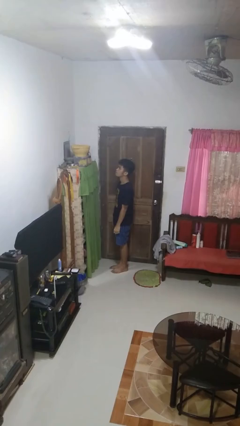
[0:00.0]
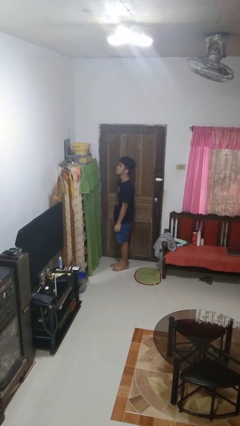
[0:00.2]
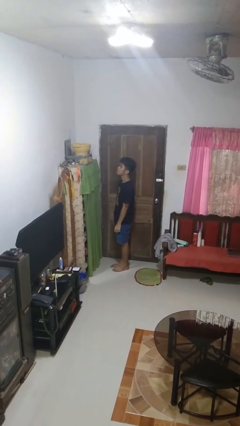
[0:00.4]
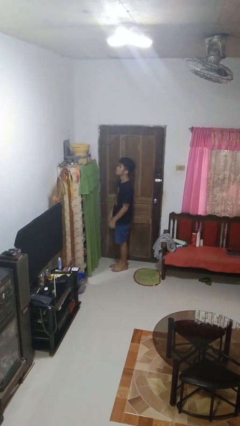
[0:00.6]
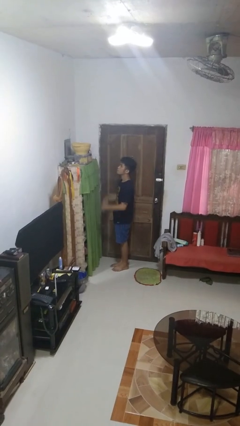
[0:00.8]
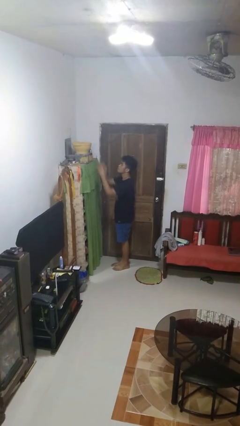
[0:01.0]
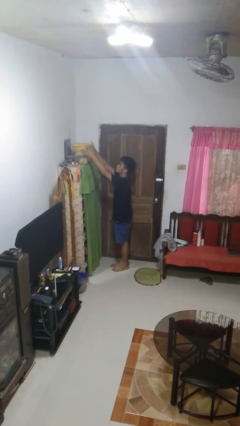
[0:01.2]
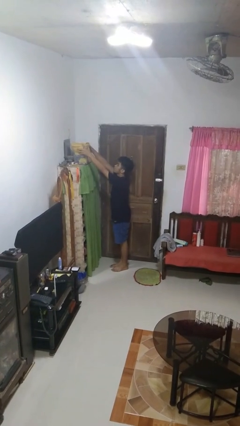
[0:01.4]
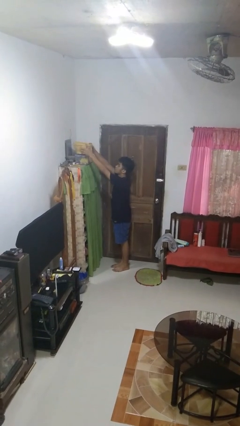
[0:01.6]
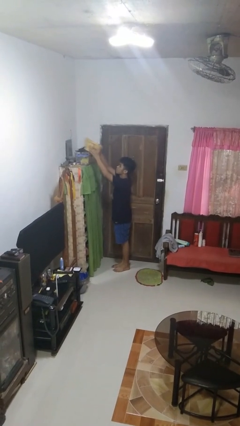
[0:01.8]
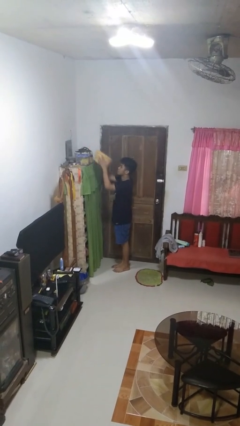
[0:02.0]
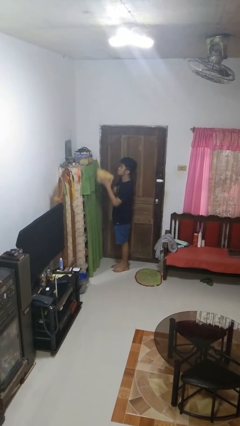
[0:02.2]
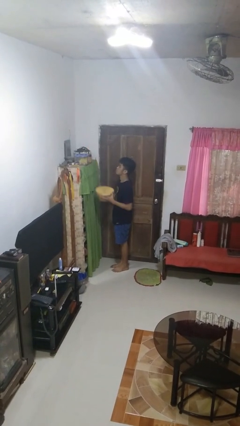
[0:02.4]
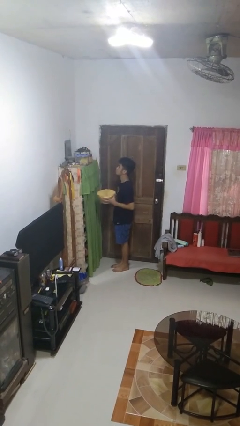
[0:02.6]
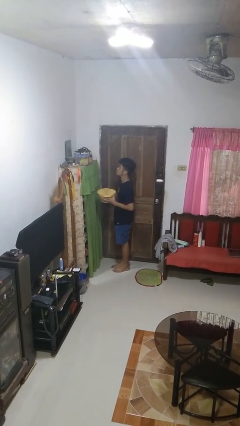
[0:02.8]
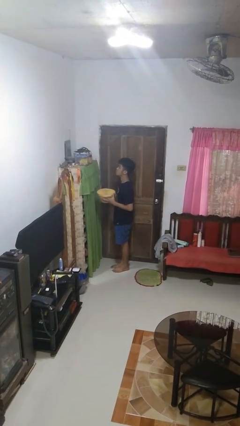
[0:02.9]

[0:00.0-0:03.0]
person picks up object from shelf

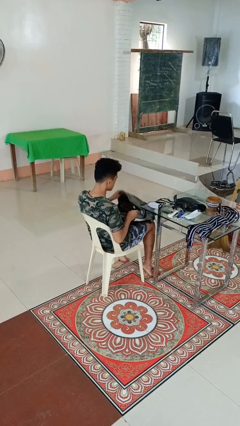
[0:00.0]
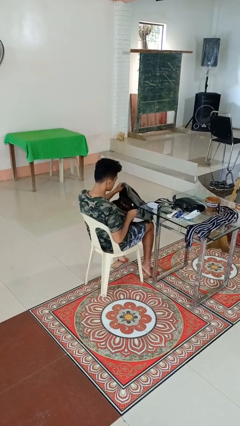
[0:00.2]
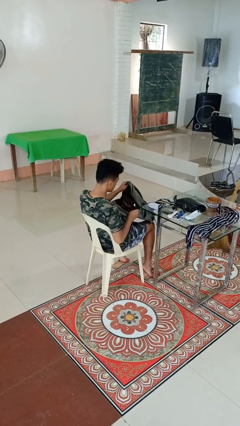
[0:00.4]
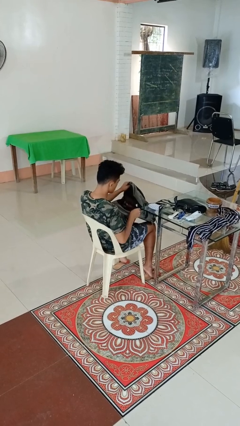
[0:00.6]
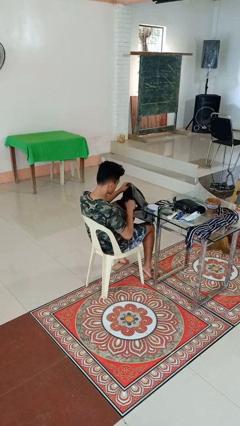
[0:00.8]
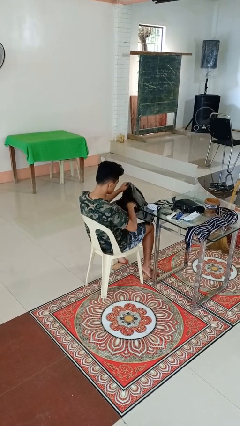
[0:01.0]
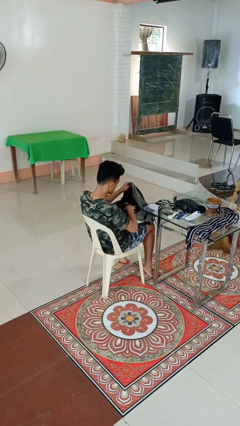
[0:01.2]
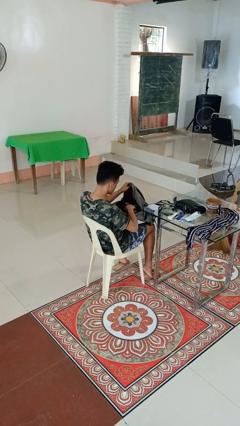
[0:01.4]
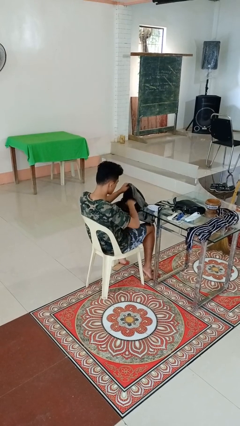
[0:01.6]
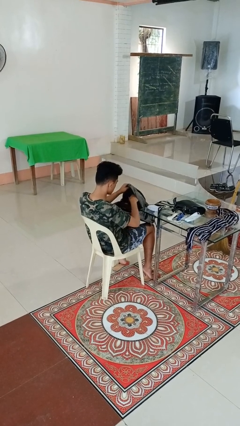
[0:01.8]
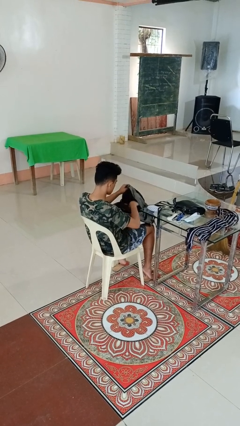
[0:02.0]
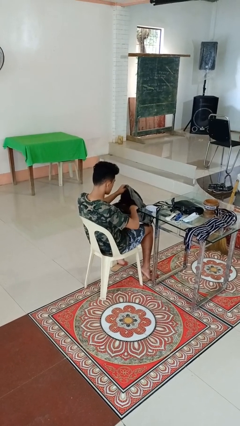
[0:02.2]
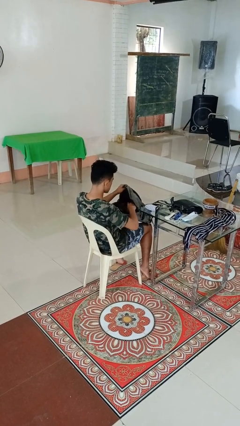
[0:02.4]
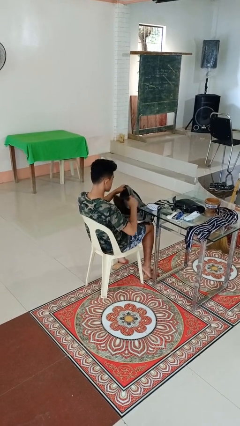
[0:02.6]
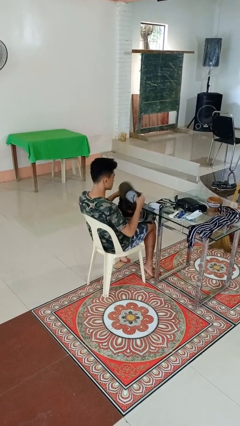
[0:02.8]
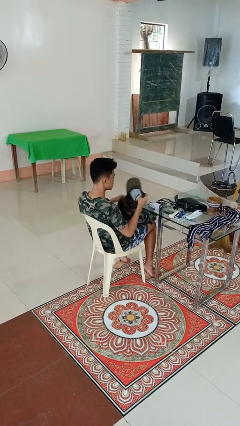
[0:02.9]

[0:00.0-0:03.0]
person searches in backpack

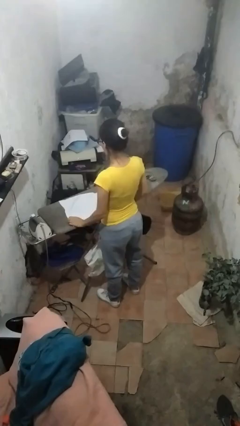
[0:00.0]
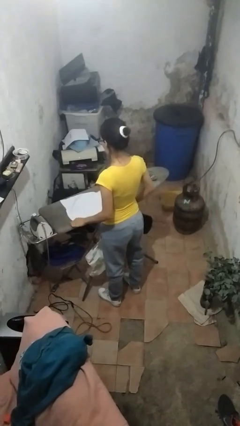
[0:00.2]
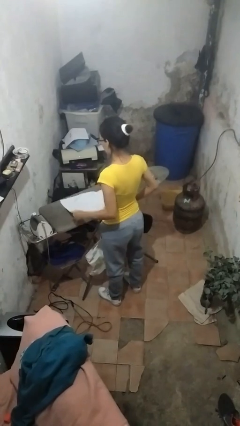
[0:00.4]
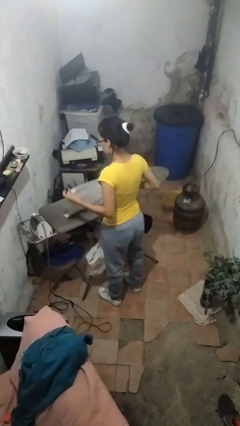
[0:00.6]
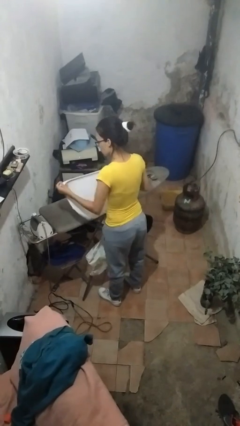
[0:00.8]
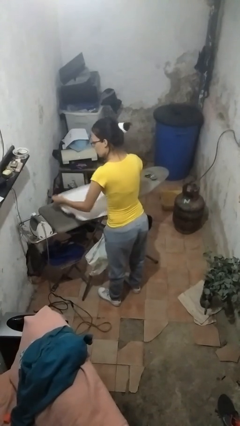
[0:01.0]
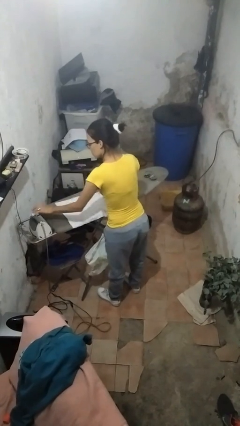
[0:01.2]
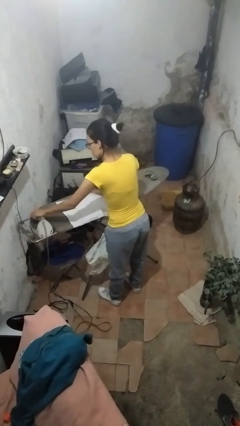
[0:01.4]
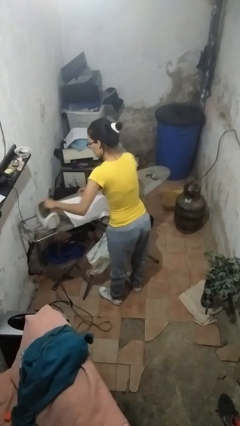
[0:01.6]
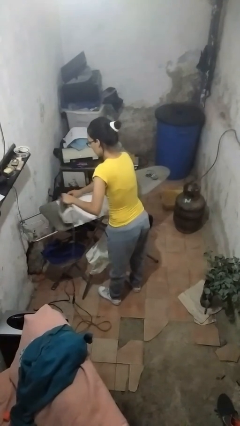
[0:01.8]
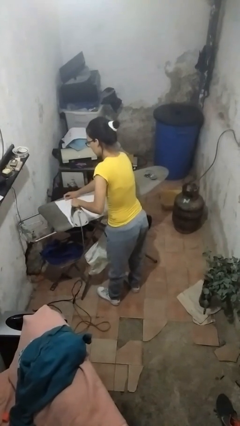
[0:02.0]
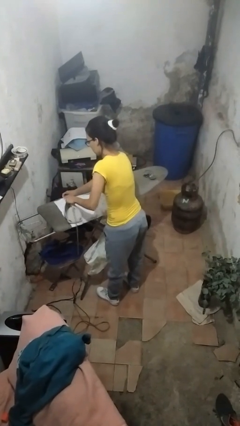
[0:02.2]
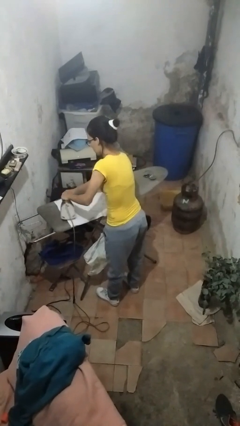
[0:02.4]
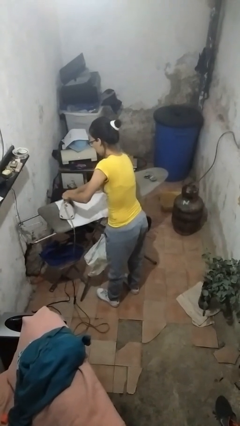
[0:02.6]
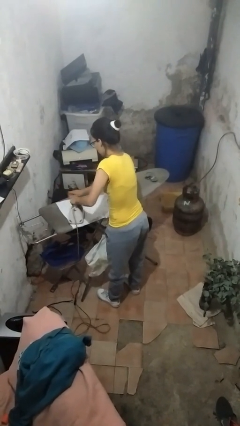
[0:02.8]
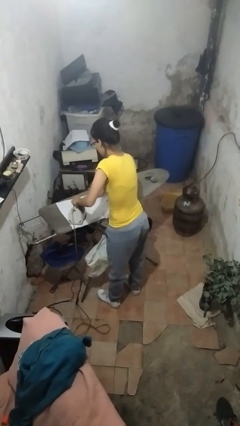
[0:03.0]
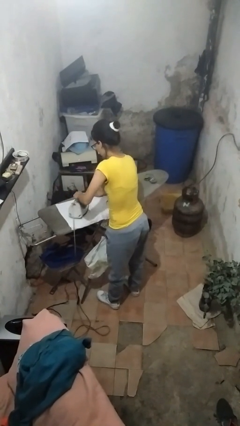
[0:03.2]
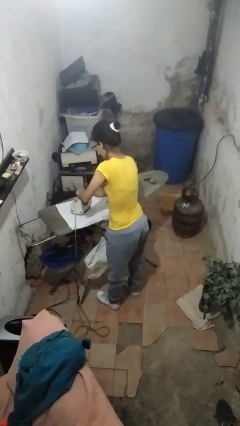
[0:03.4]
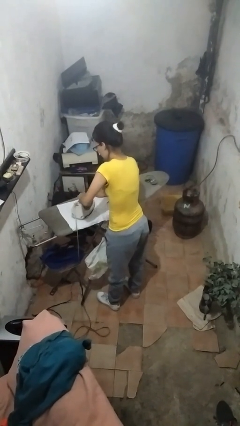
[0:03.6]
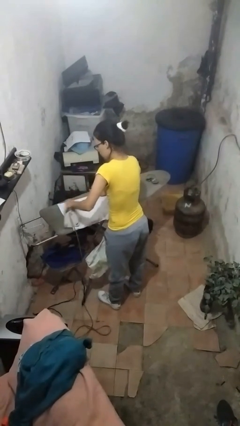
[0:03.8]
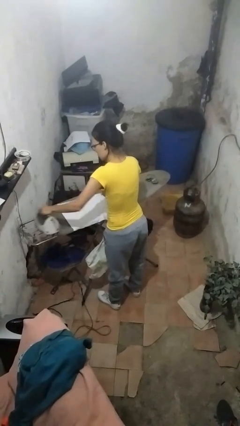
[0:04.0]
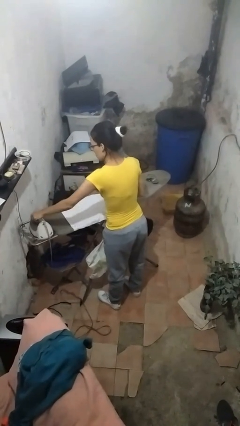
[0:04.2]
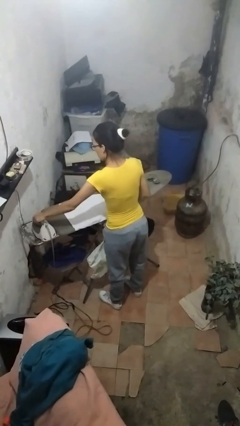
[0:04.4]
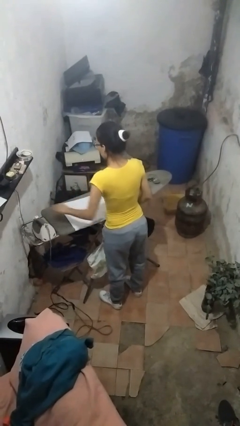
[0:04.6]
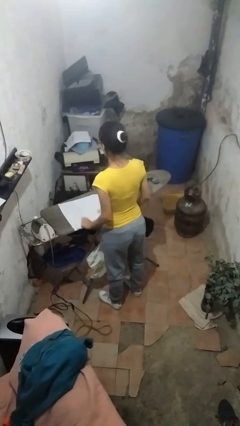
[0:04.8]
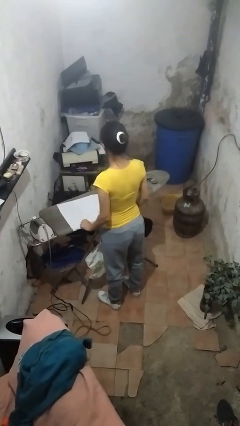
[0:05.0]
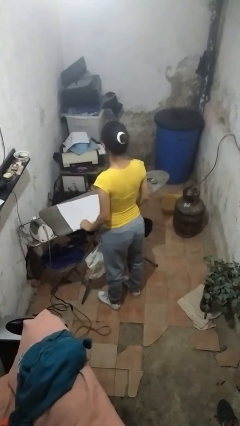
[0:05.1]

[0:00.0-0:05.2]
person irons clothes

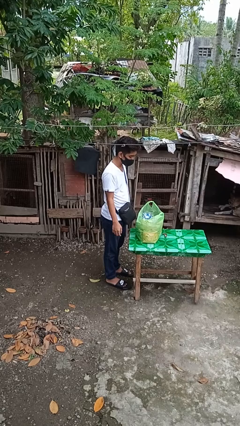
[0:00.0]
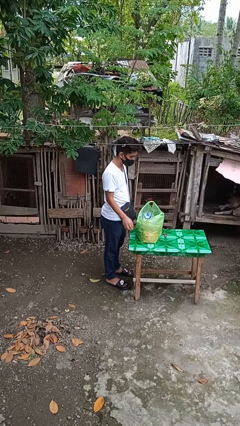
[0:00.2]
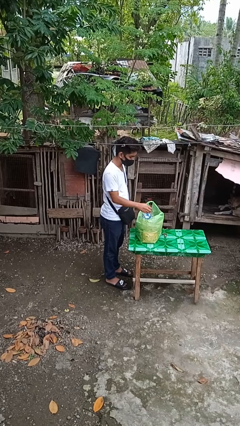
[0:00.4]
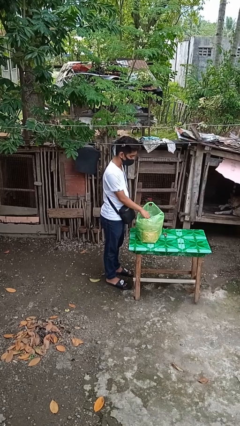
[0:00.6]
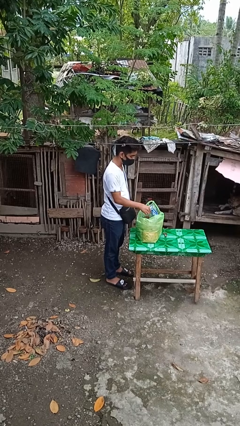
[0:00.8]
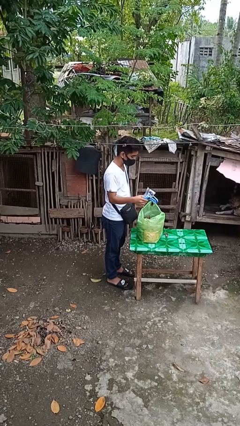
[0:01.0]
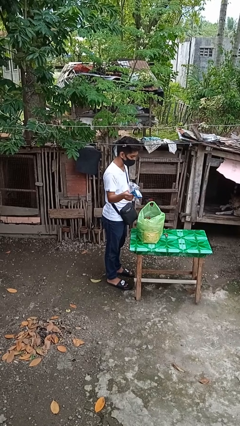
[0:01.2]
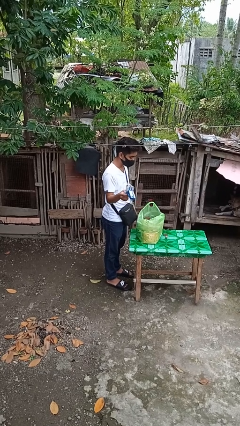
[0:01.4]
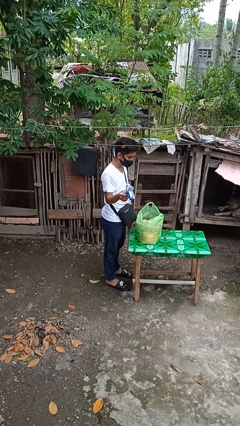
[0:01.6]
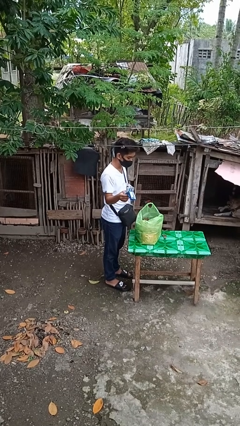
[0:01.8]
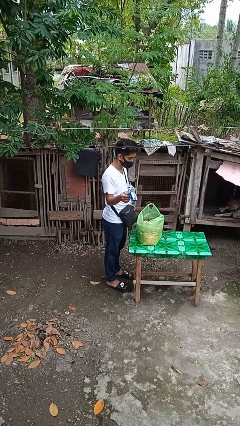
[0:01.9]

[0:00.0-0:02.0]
person takes object from bag

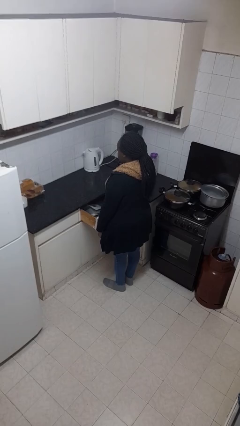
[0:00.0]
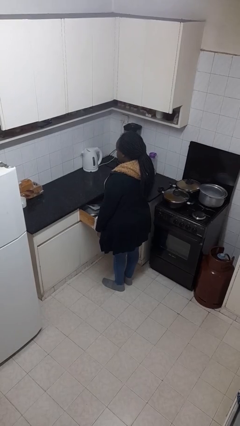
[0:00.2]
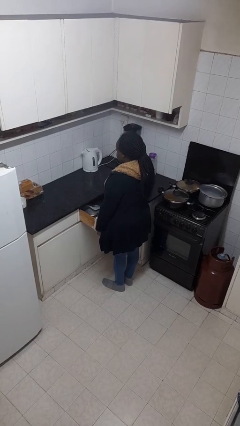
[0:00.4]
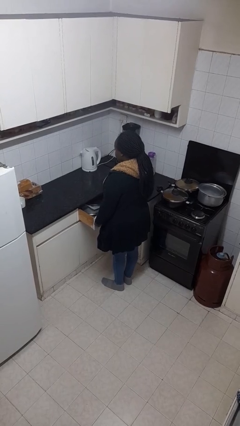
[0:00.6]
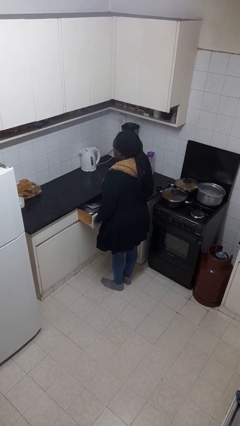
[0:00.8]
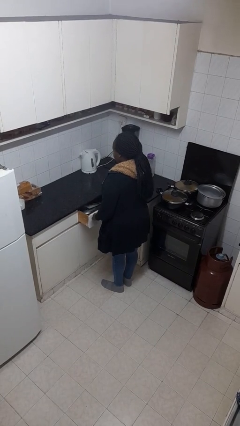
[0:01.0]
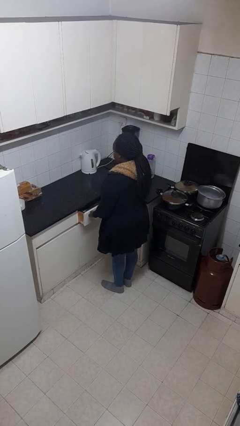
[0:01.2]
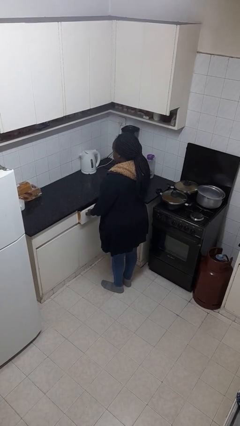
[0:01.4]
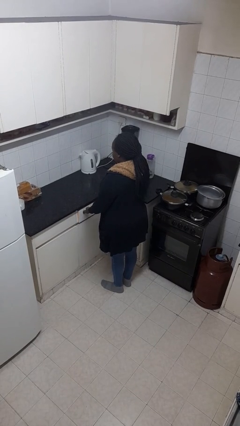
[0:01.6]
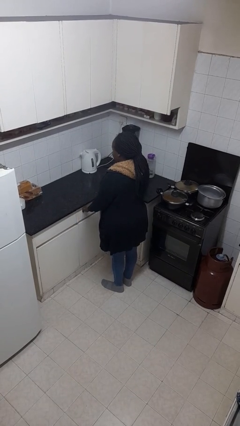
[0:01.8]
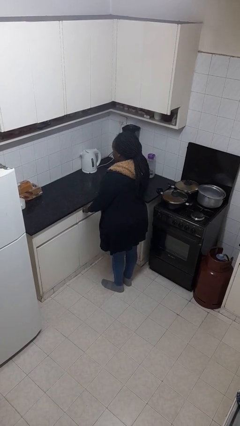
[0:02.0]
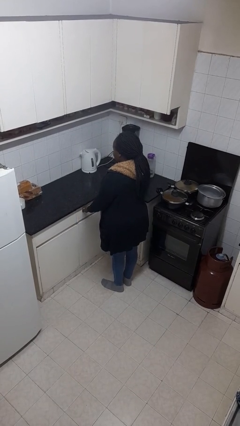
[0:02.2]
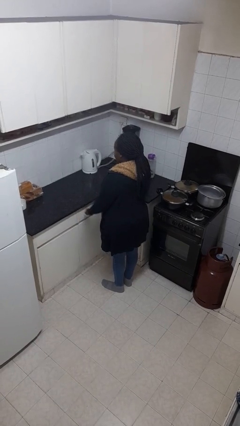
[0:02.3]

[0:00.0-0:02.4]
person closes kitchen drawer

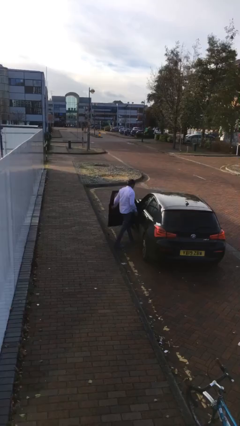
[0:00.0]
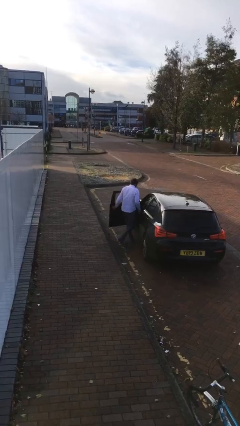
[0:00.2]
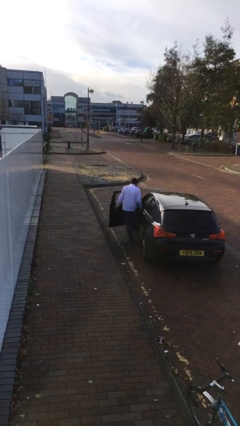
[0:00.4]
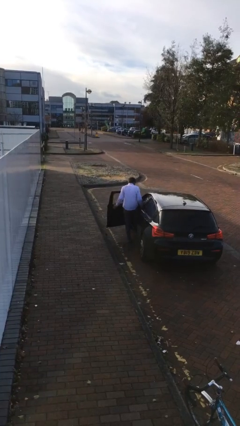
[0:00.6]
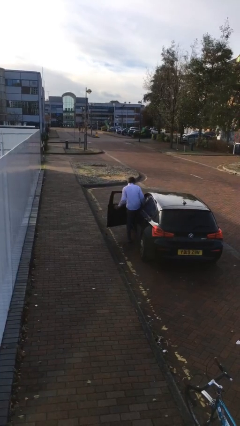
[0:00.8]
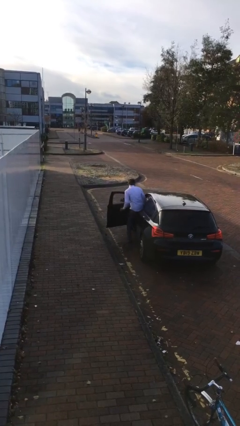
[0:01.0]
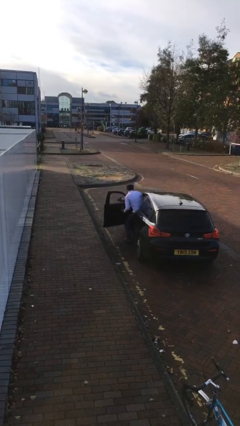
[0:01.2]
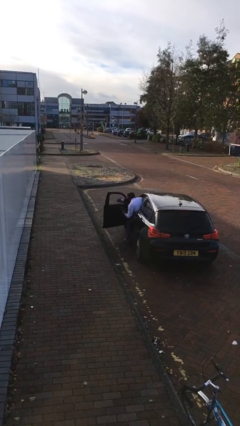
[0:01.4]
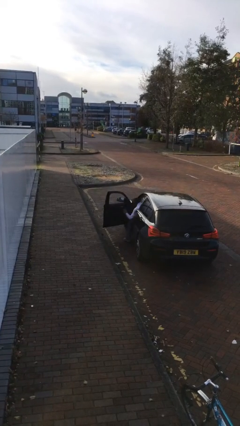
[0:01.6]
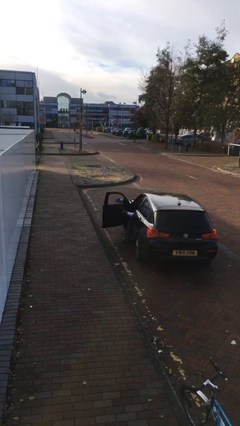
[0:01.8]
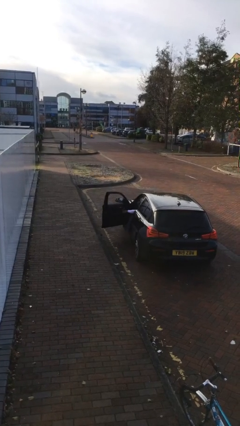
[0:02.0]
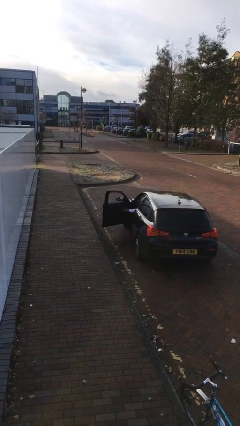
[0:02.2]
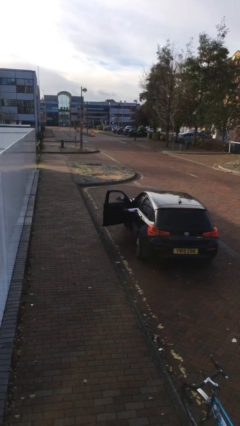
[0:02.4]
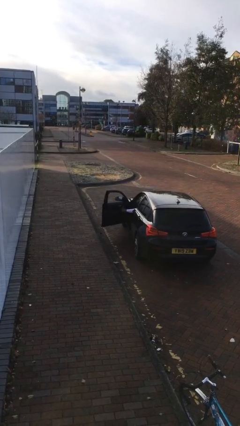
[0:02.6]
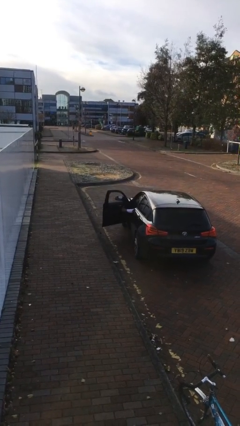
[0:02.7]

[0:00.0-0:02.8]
person enters car
